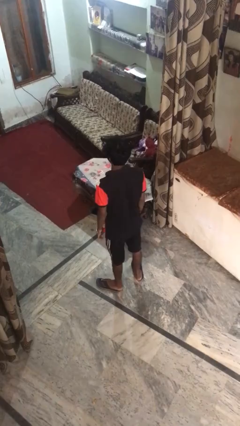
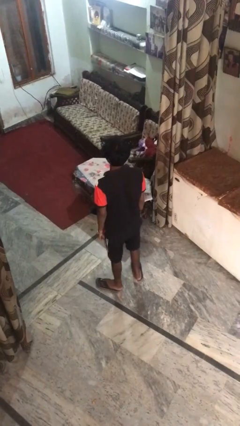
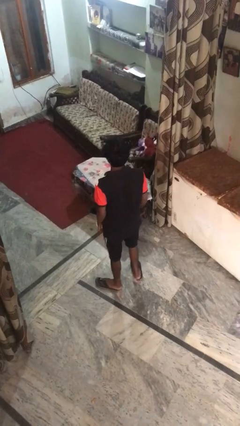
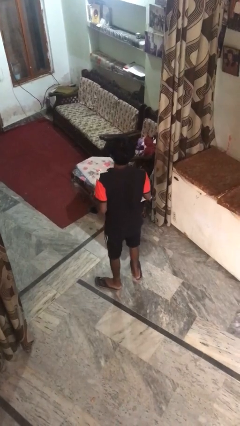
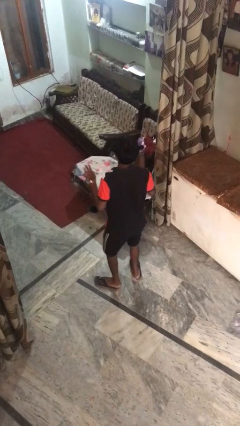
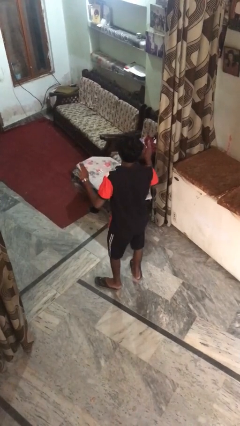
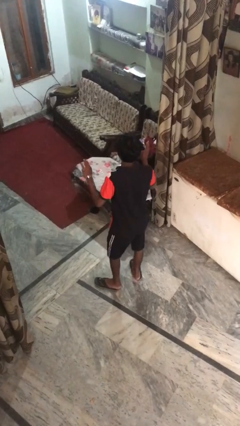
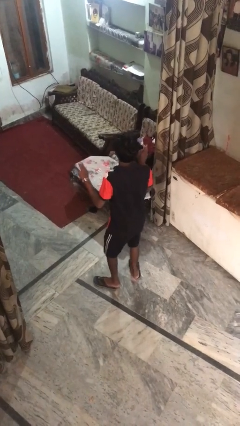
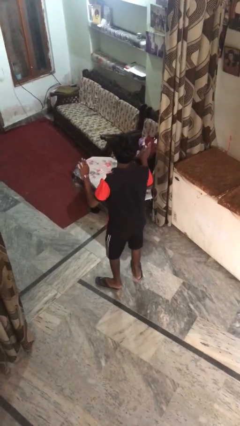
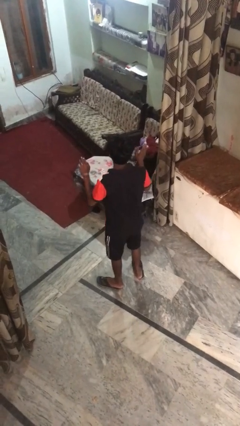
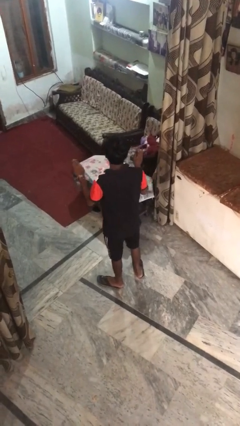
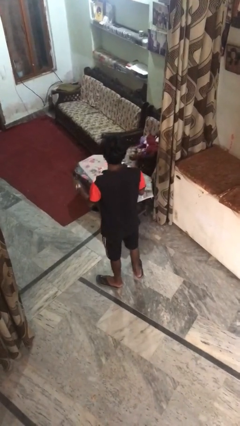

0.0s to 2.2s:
person dances in place

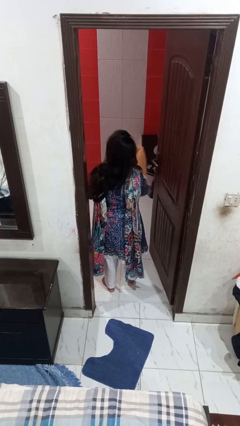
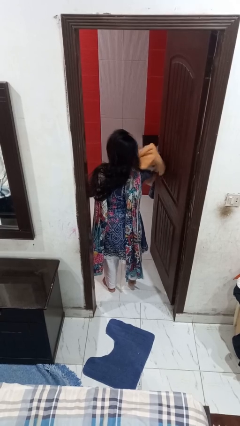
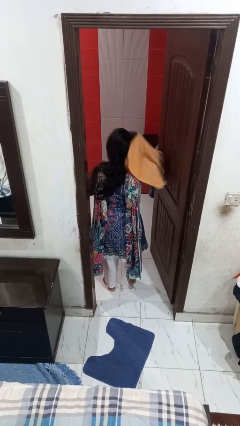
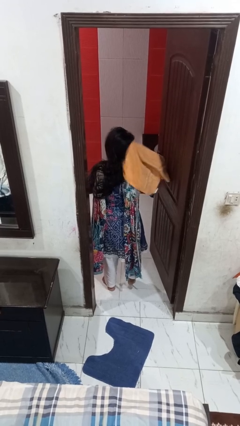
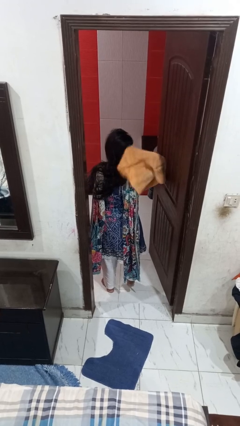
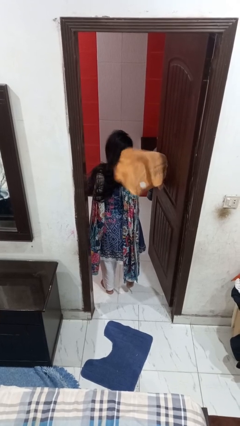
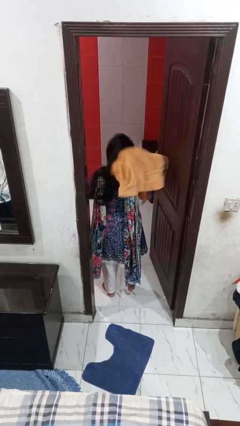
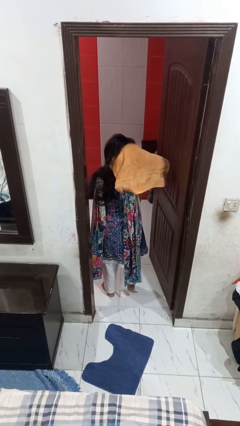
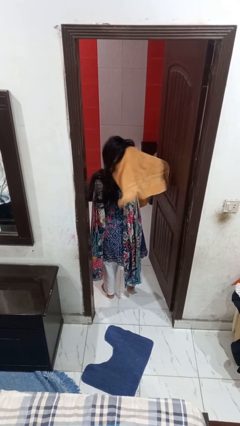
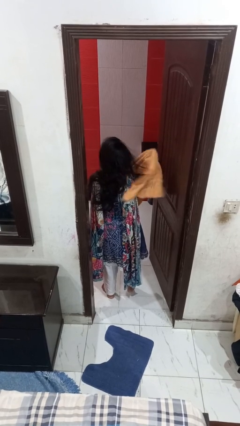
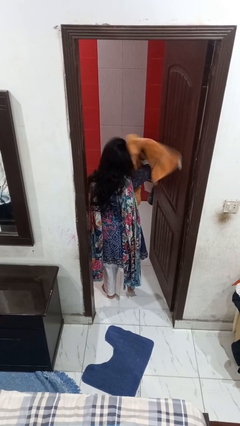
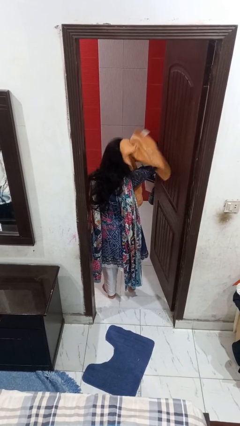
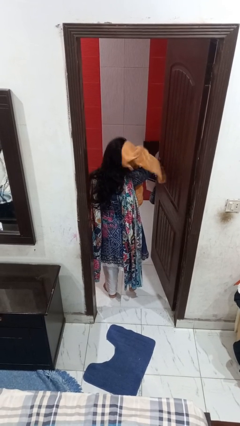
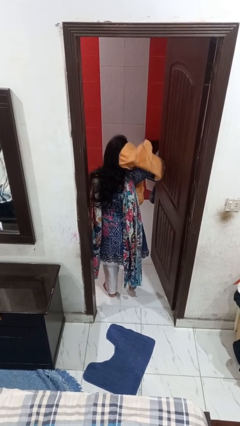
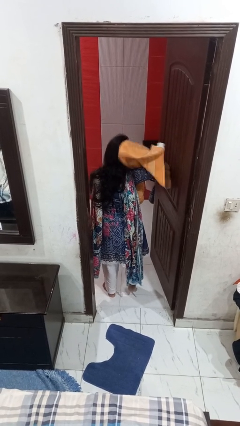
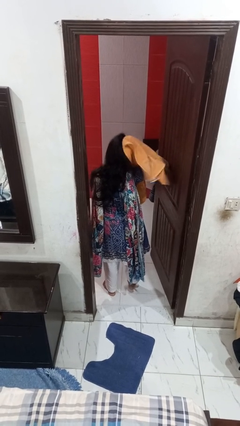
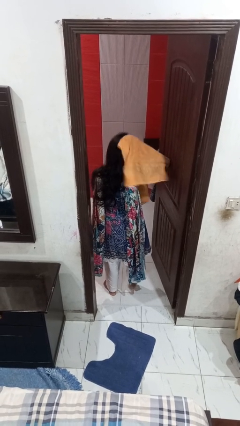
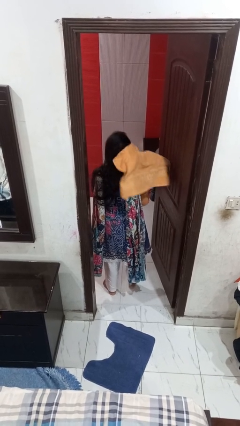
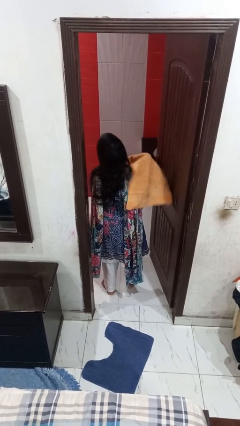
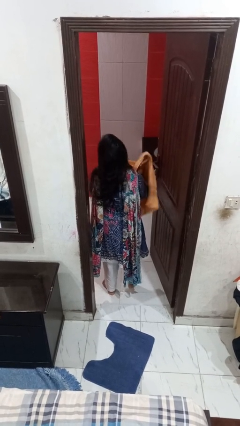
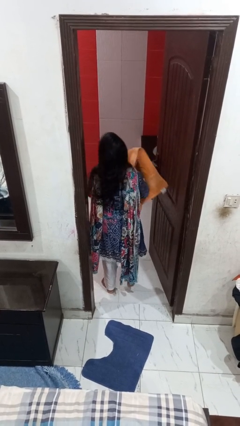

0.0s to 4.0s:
person dries hair with towel

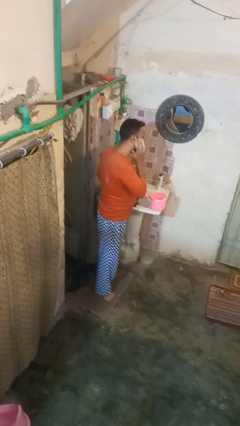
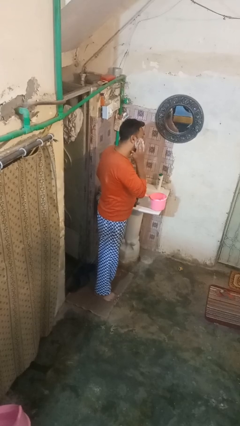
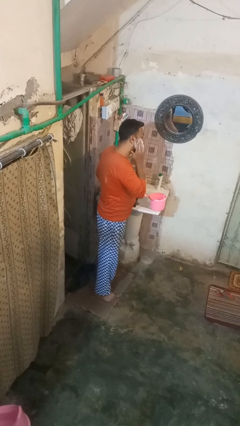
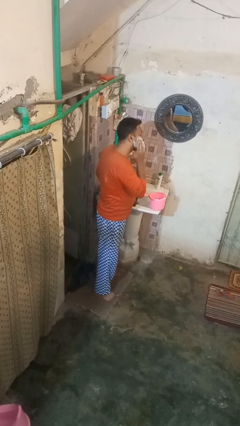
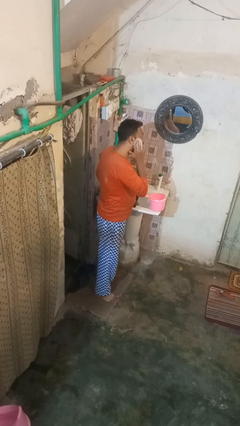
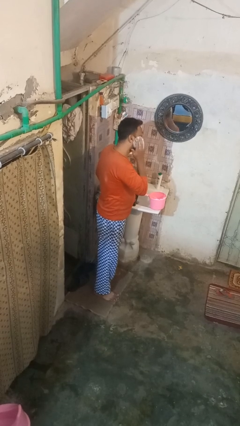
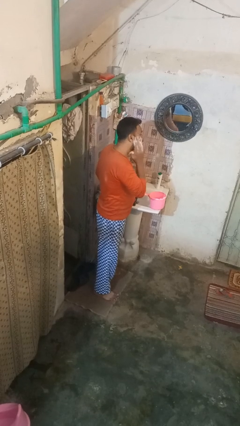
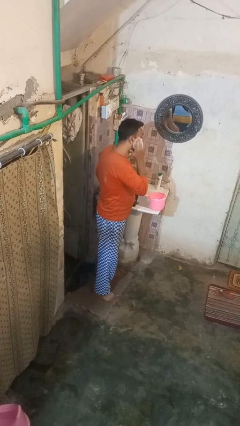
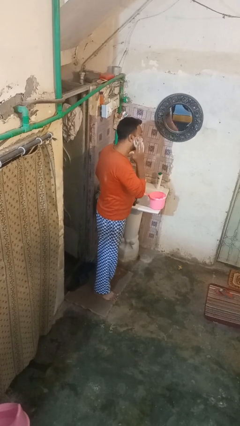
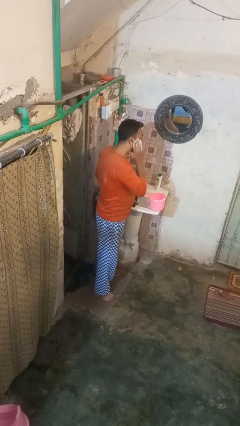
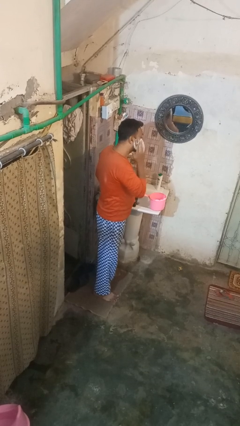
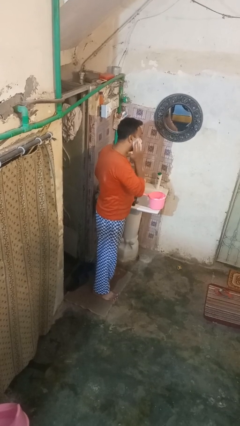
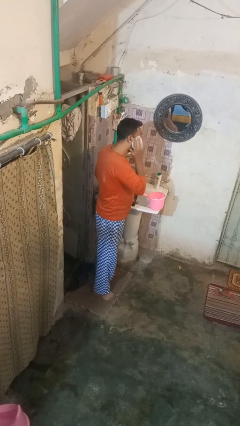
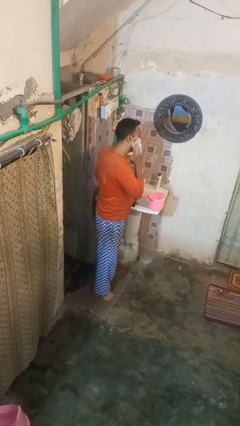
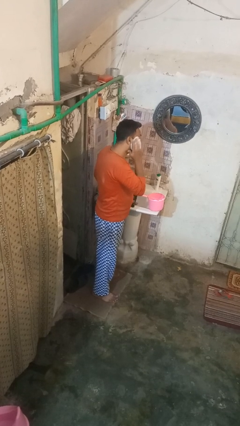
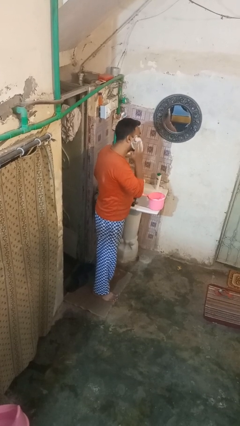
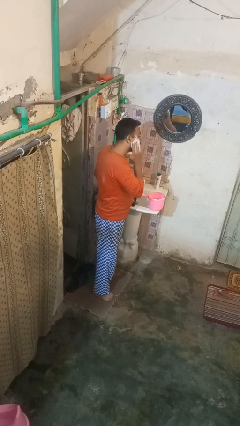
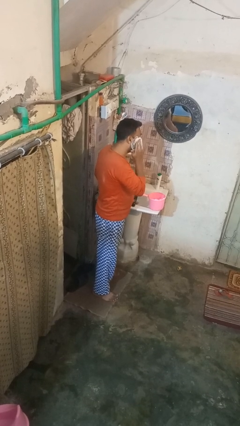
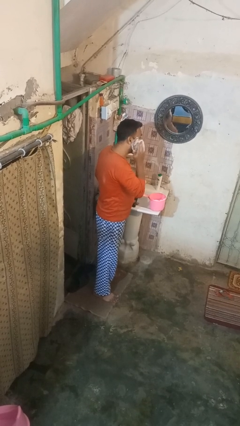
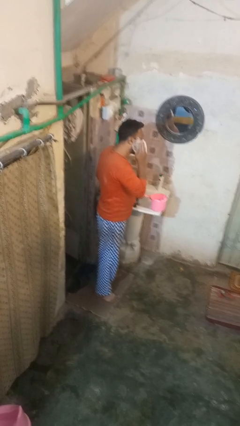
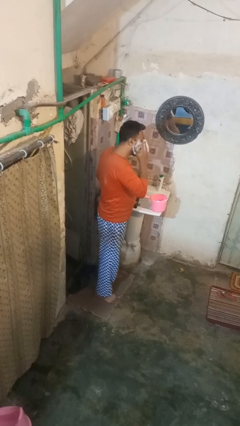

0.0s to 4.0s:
person shaves face

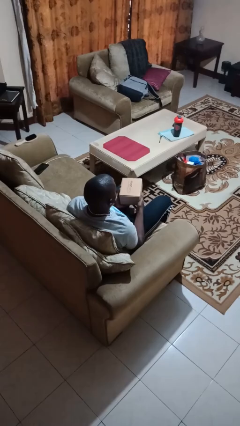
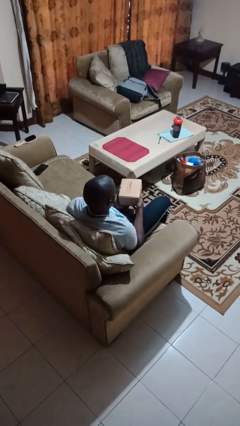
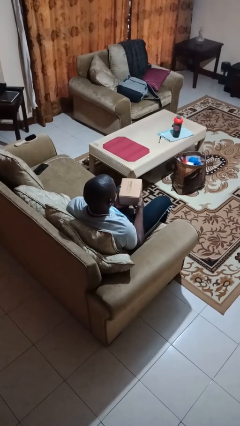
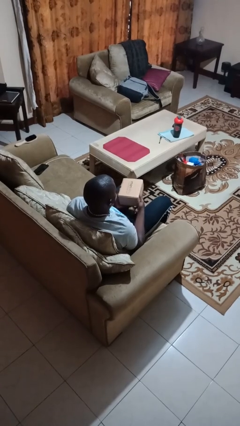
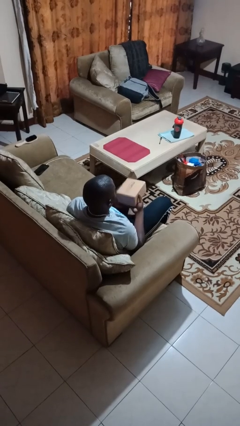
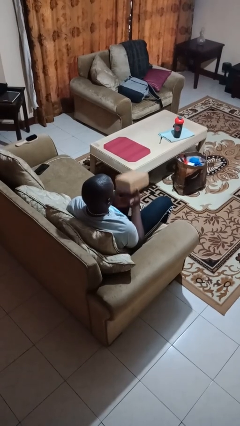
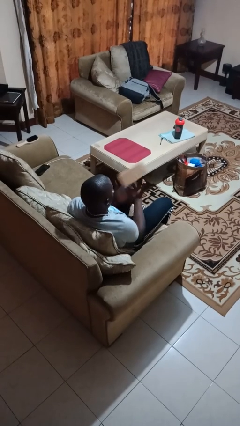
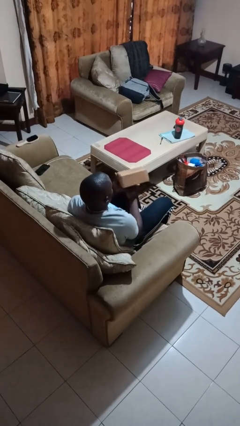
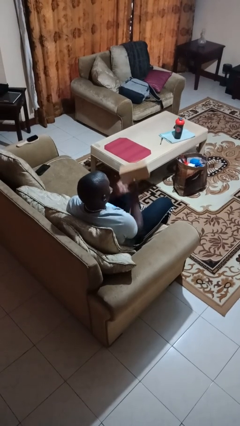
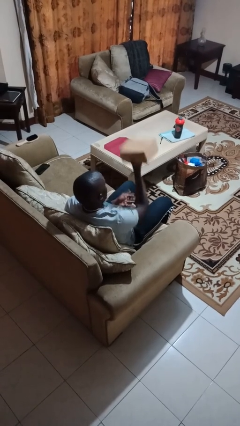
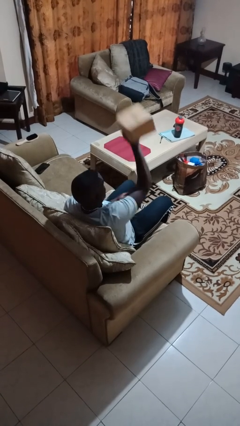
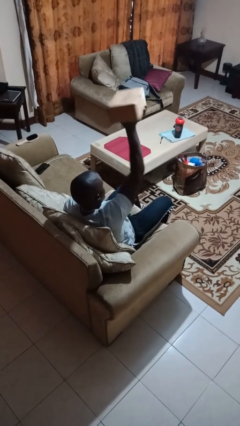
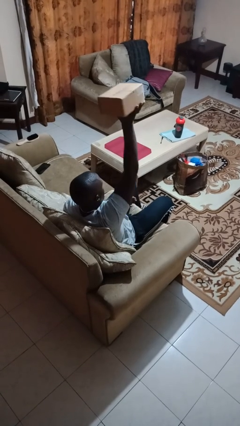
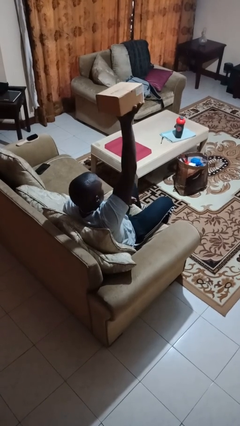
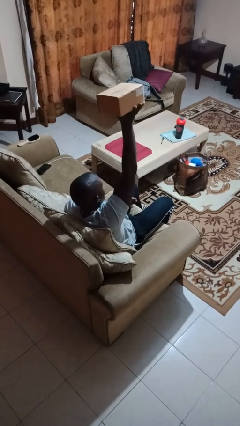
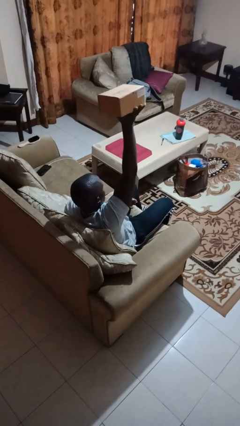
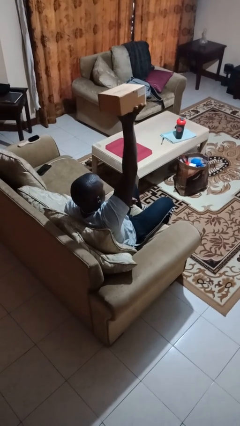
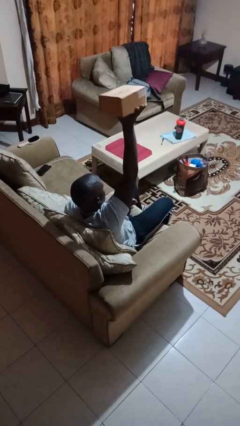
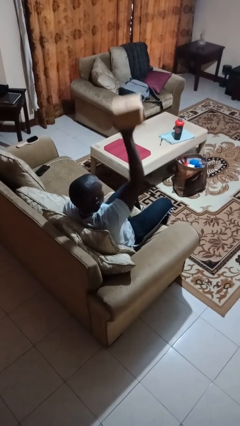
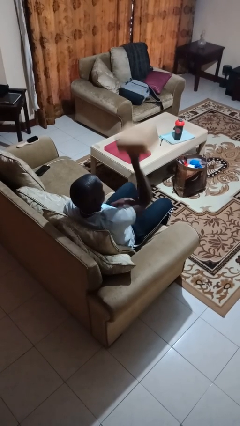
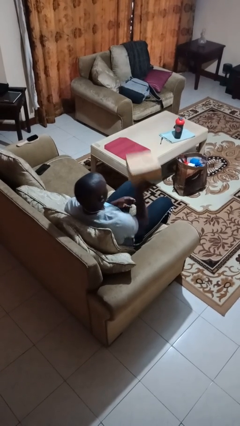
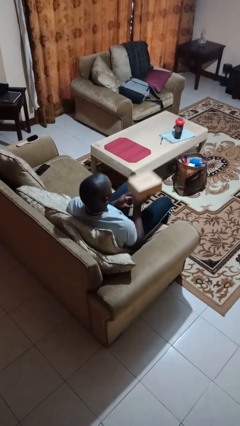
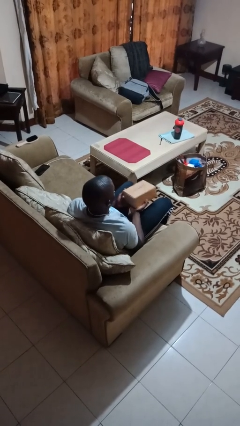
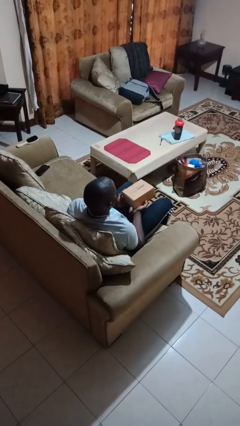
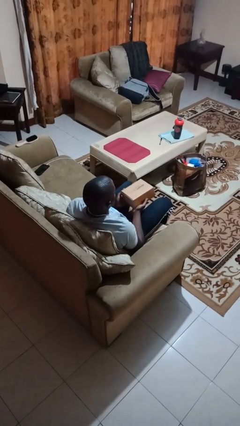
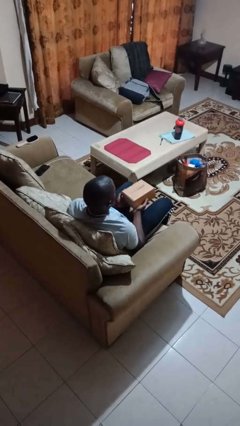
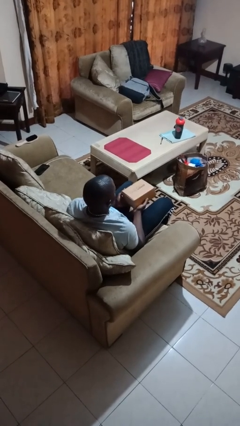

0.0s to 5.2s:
person holds object above head

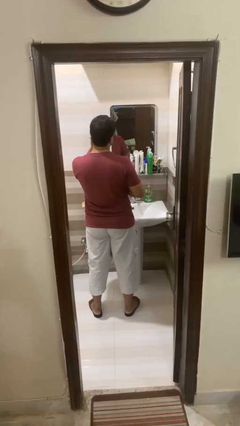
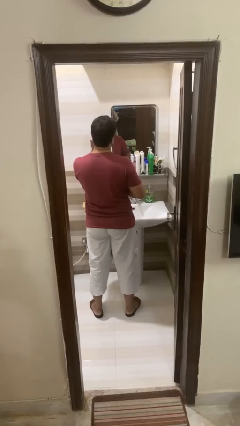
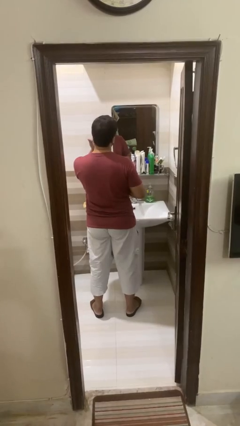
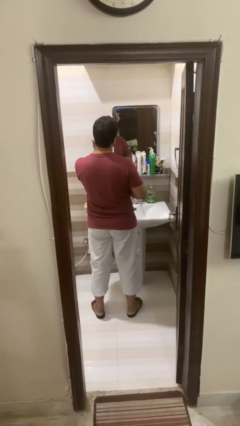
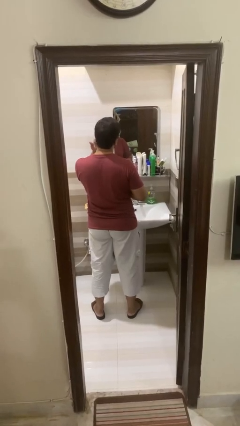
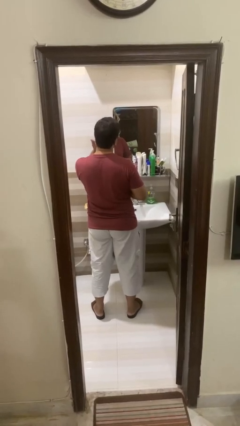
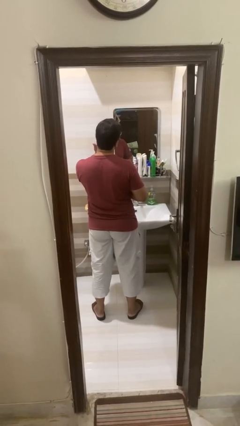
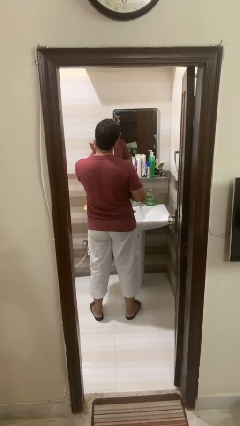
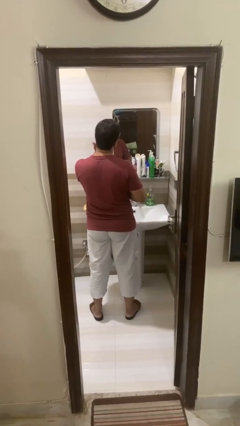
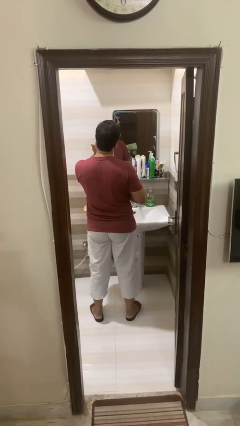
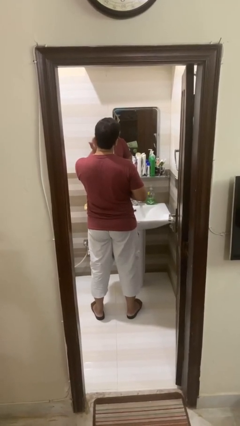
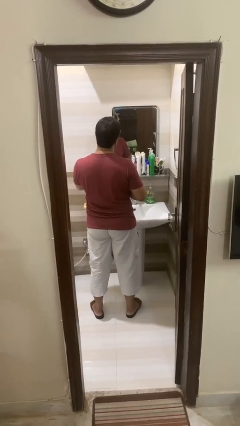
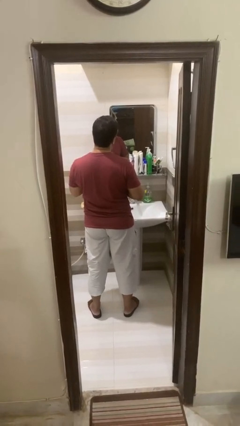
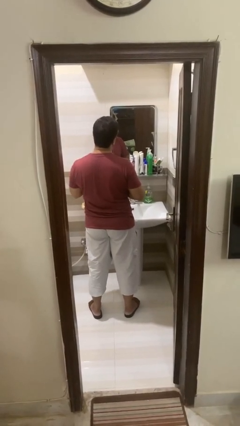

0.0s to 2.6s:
person applies shaving cream
